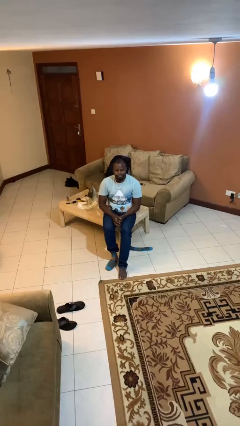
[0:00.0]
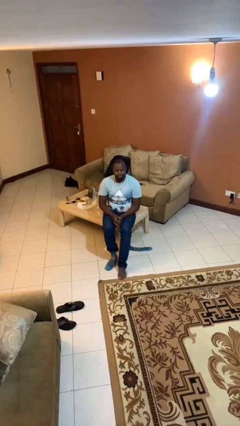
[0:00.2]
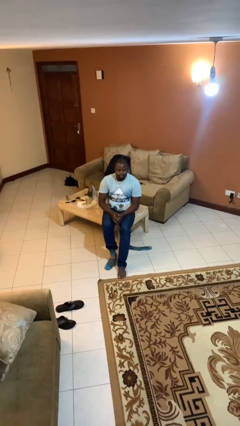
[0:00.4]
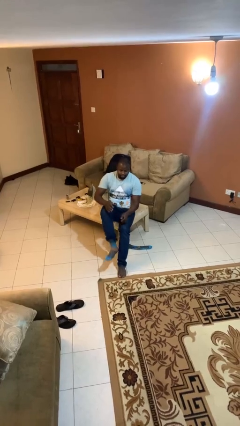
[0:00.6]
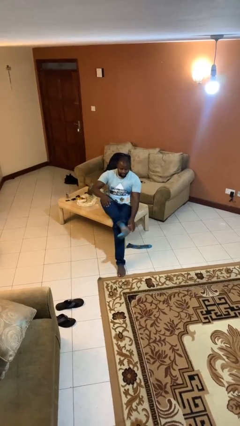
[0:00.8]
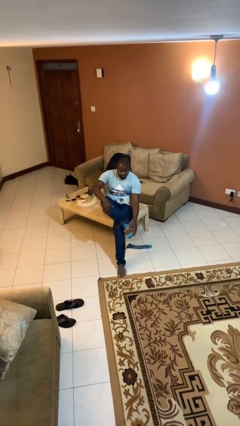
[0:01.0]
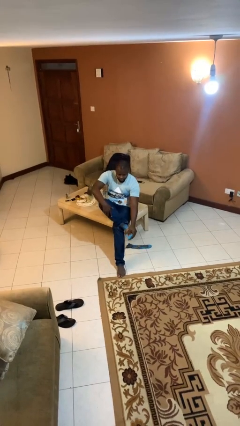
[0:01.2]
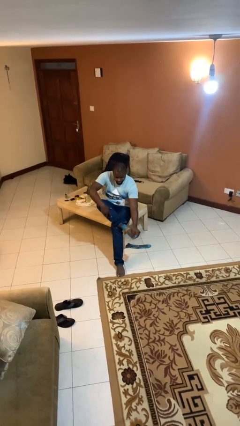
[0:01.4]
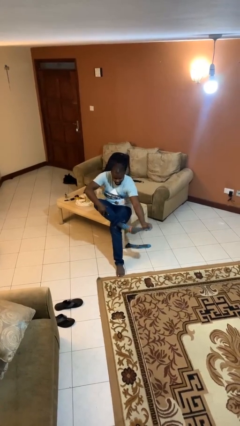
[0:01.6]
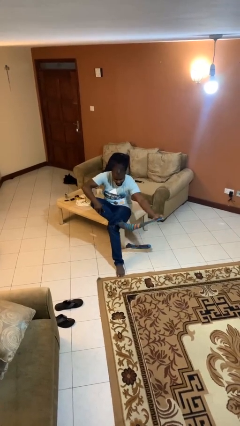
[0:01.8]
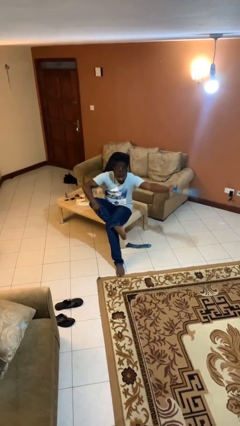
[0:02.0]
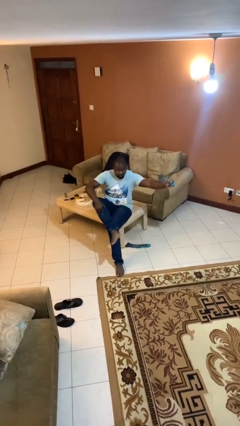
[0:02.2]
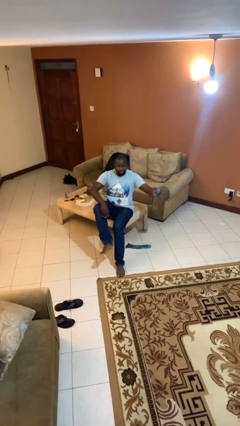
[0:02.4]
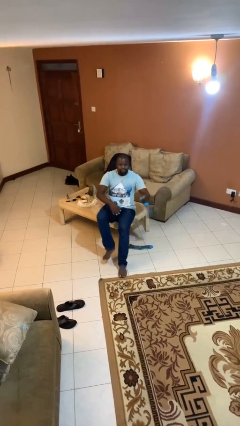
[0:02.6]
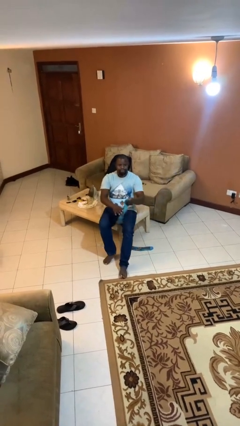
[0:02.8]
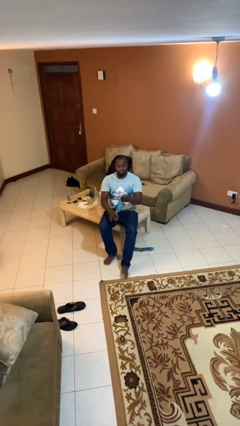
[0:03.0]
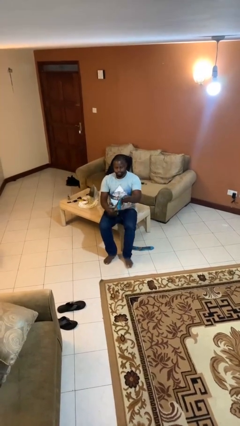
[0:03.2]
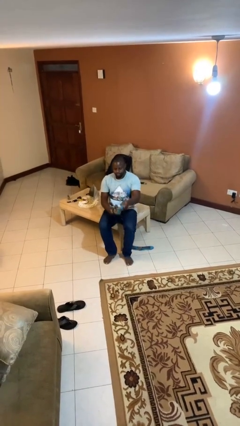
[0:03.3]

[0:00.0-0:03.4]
person takes off socks

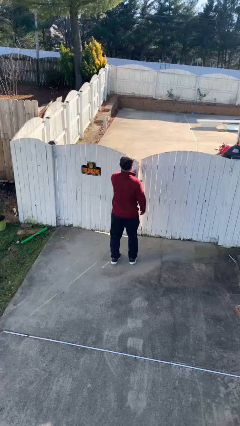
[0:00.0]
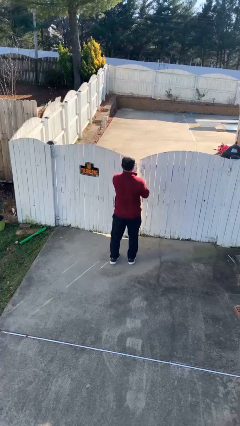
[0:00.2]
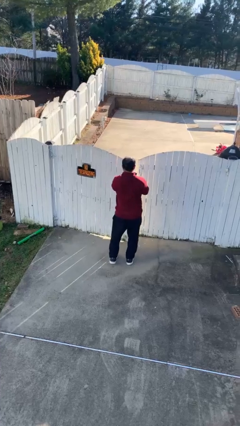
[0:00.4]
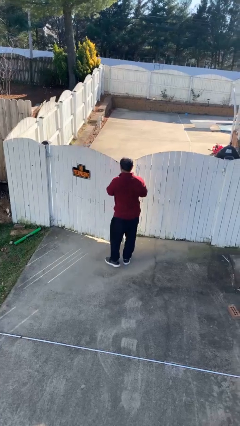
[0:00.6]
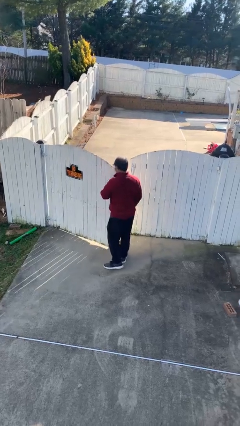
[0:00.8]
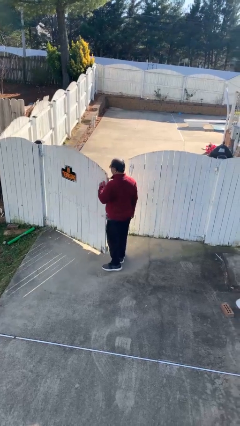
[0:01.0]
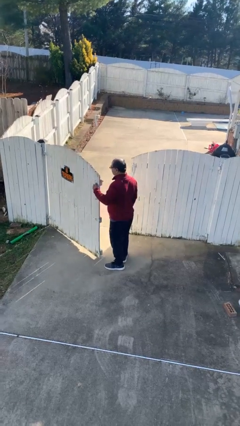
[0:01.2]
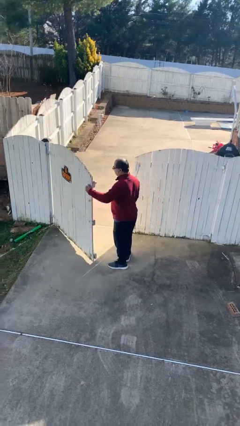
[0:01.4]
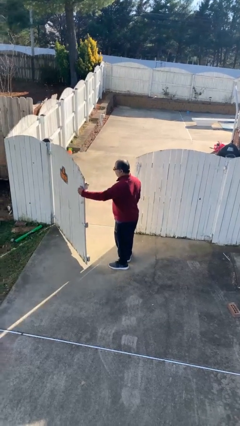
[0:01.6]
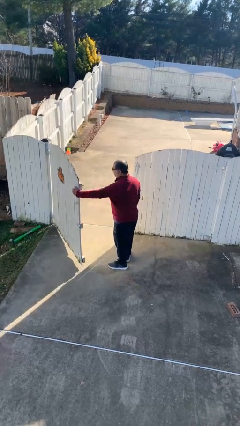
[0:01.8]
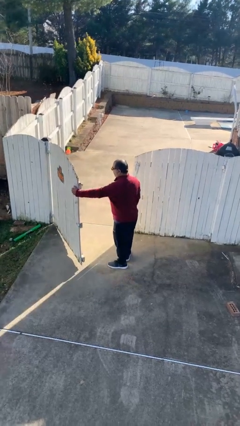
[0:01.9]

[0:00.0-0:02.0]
person opens facility door

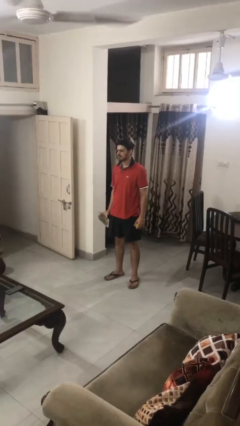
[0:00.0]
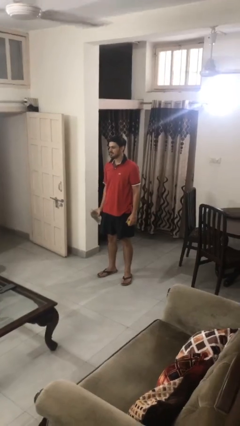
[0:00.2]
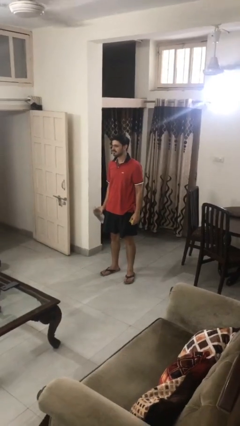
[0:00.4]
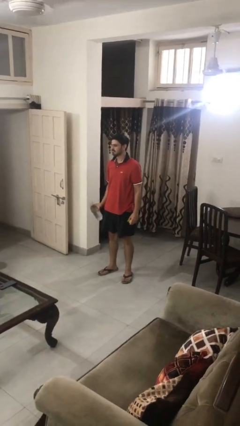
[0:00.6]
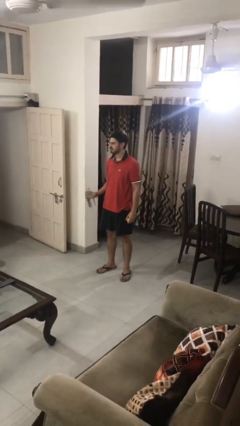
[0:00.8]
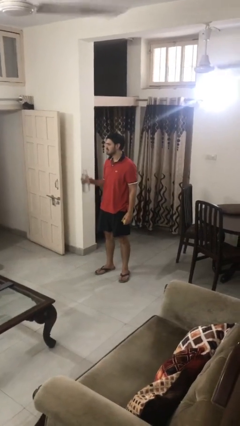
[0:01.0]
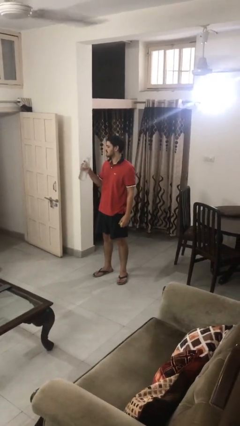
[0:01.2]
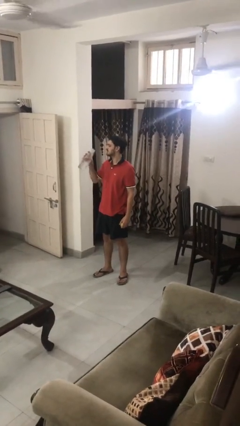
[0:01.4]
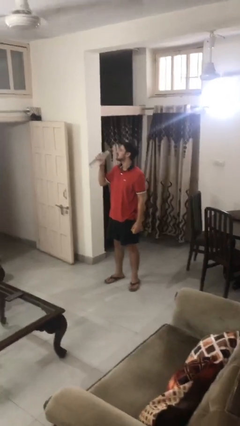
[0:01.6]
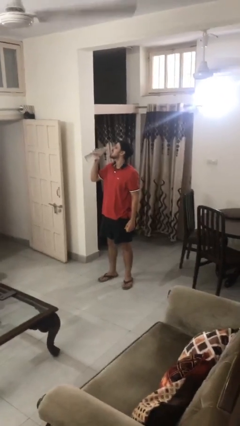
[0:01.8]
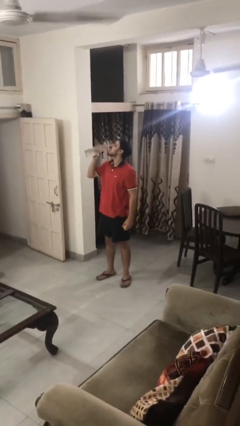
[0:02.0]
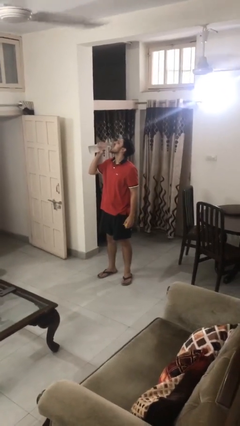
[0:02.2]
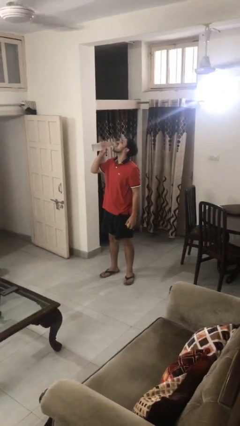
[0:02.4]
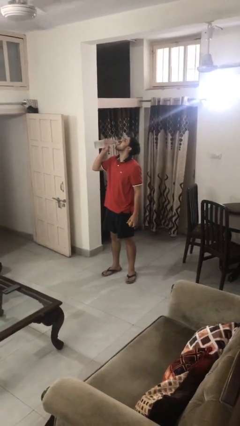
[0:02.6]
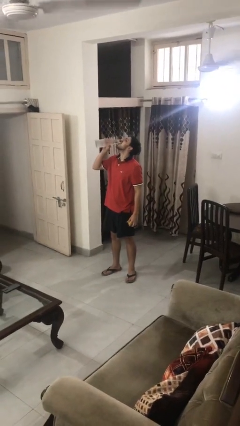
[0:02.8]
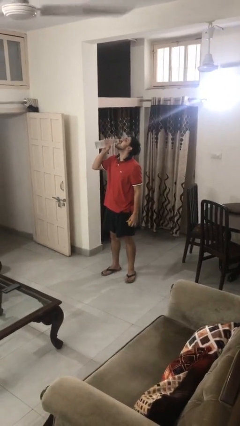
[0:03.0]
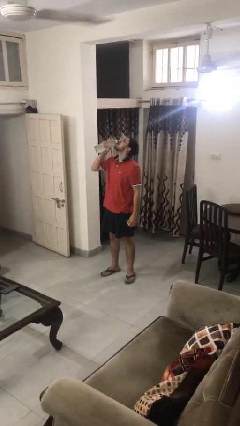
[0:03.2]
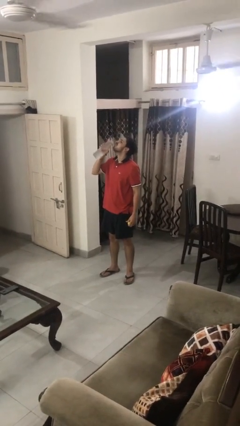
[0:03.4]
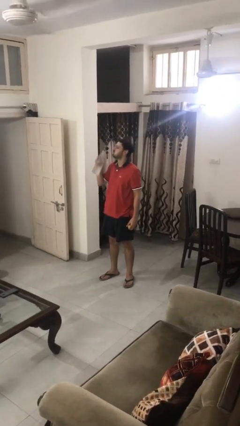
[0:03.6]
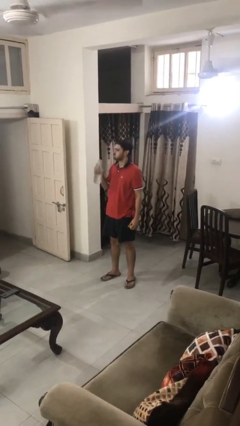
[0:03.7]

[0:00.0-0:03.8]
person drinks from bottle

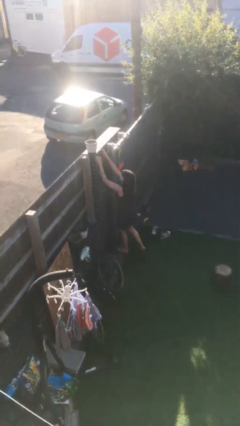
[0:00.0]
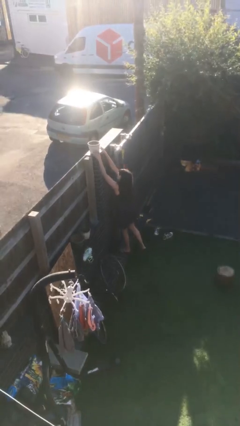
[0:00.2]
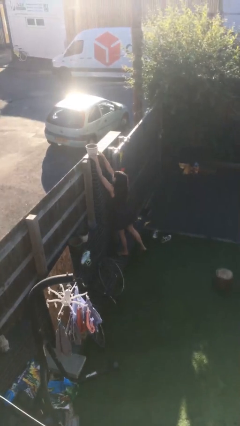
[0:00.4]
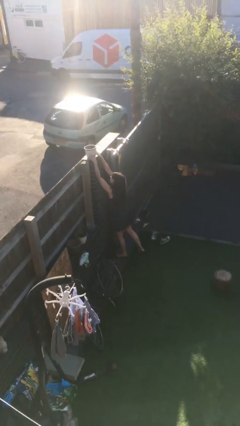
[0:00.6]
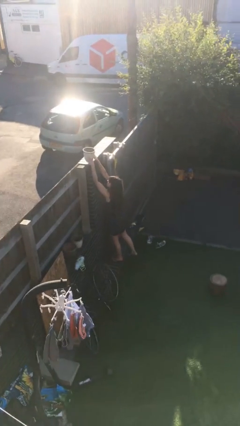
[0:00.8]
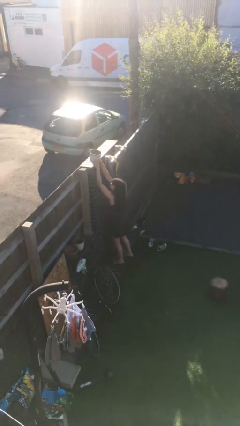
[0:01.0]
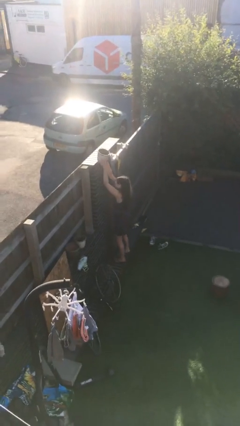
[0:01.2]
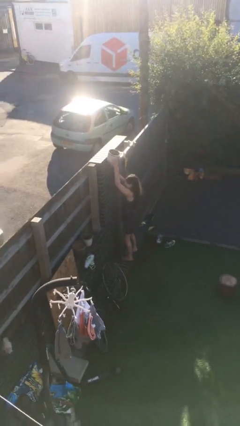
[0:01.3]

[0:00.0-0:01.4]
person picks up object from shelf

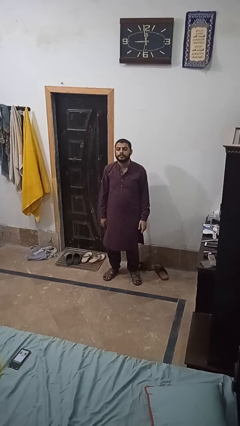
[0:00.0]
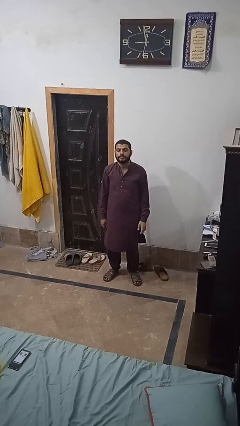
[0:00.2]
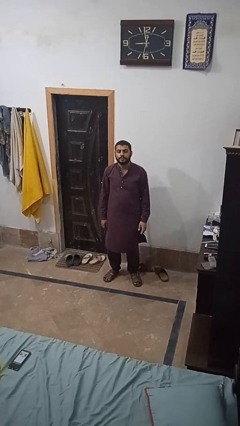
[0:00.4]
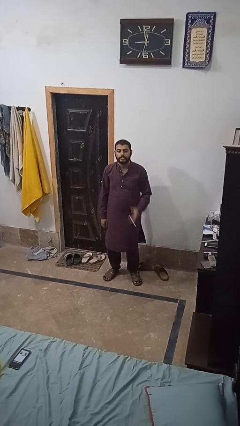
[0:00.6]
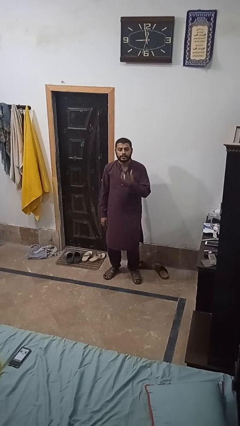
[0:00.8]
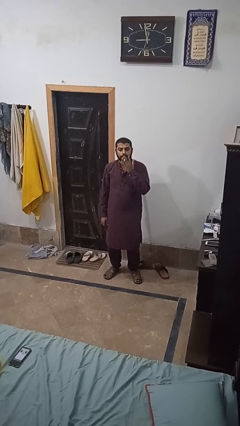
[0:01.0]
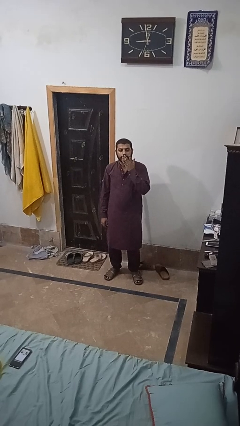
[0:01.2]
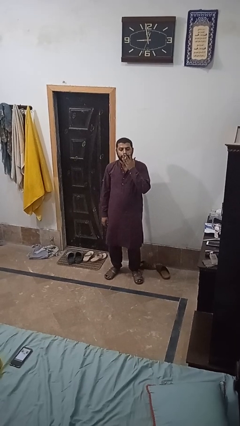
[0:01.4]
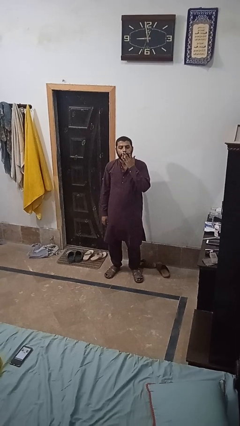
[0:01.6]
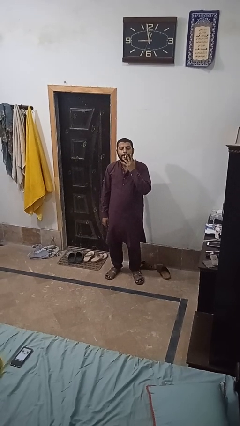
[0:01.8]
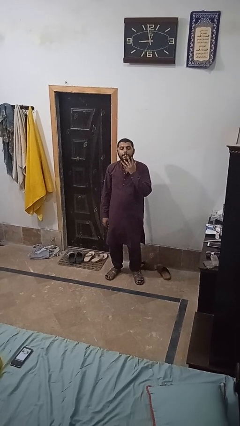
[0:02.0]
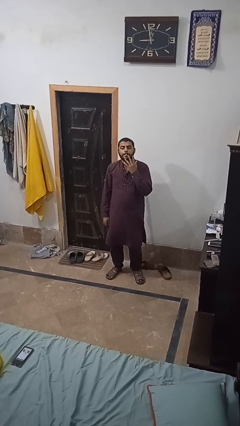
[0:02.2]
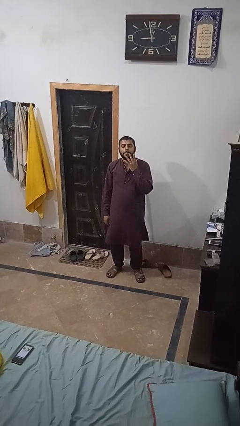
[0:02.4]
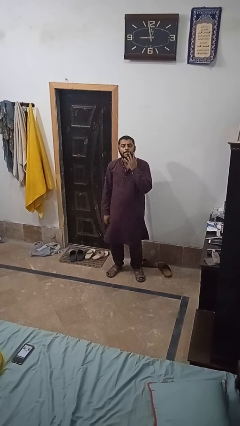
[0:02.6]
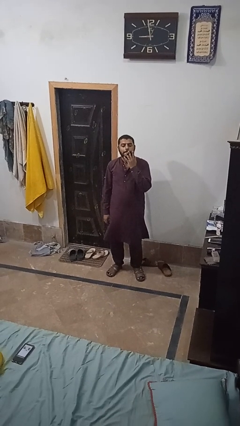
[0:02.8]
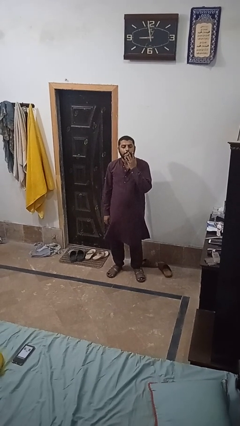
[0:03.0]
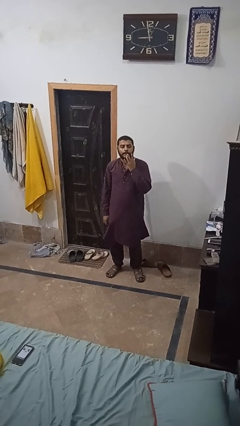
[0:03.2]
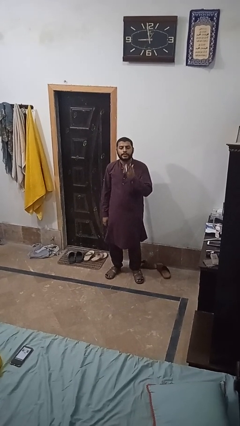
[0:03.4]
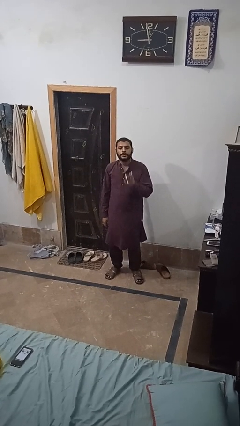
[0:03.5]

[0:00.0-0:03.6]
person vapes

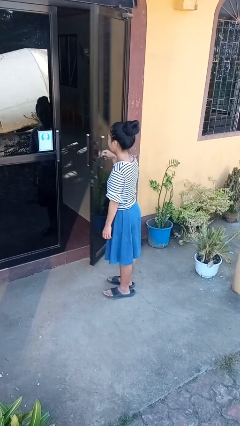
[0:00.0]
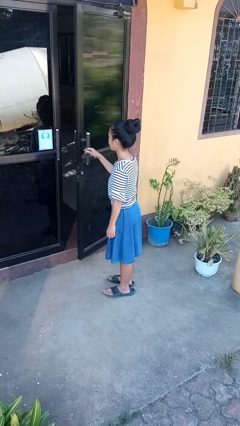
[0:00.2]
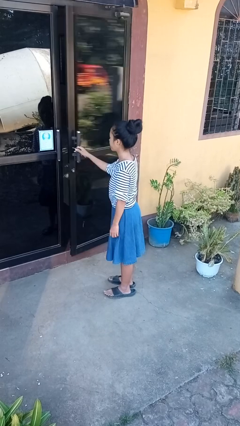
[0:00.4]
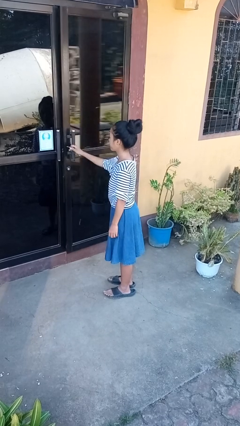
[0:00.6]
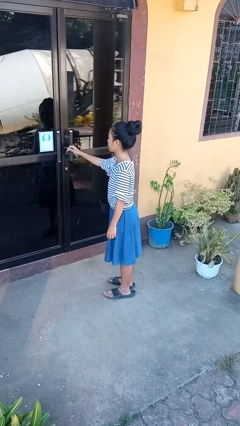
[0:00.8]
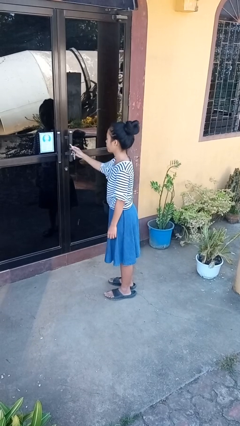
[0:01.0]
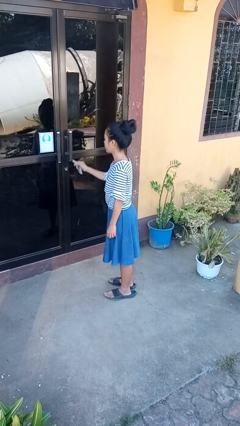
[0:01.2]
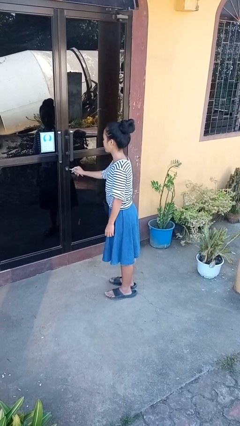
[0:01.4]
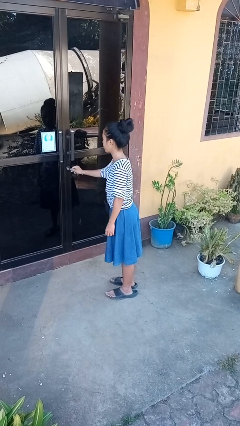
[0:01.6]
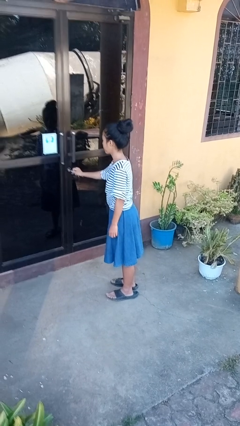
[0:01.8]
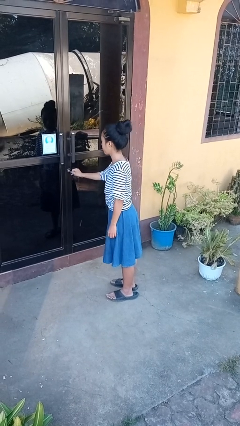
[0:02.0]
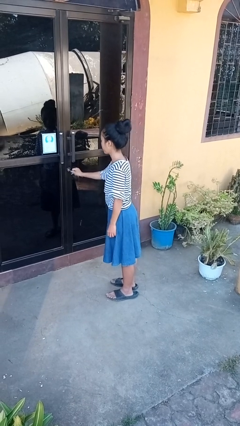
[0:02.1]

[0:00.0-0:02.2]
person closes facility door
